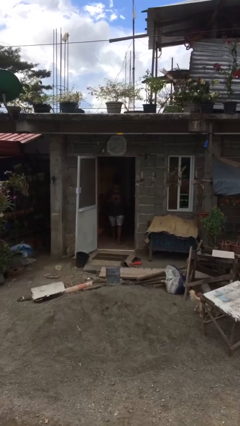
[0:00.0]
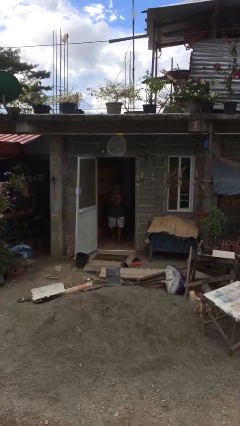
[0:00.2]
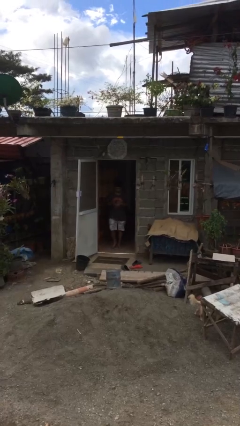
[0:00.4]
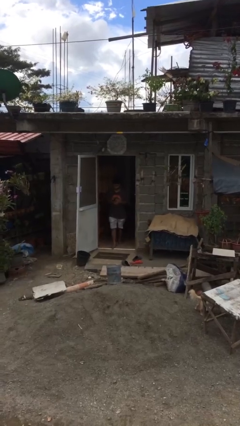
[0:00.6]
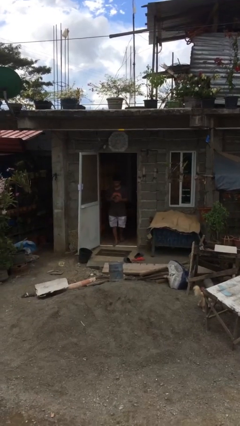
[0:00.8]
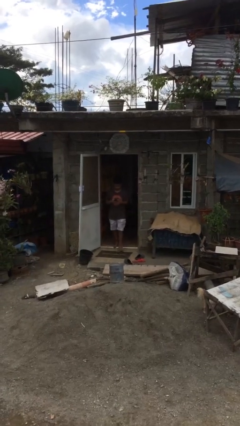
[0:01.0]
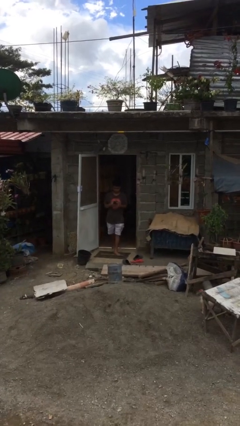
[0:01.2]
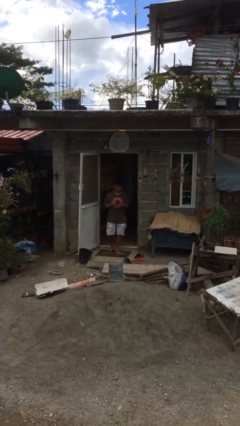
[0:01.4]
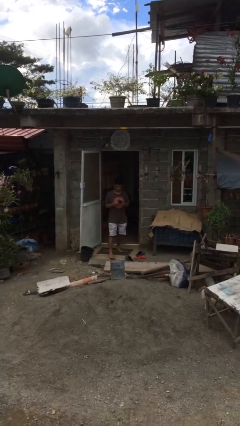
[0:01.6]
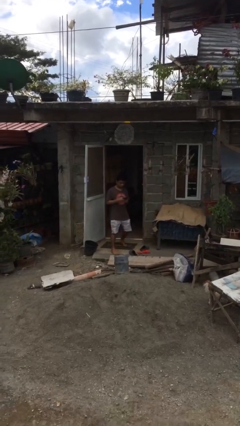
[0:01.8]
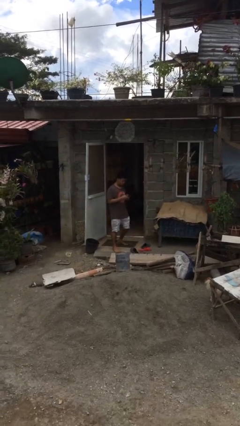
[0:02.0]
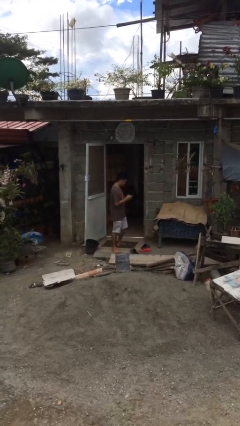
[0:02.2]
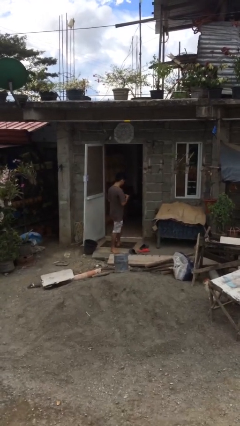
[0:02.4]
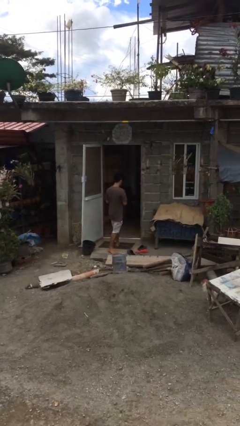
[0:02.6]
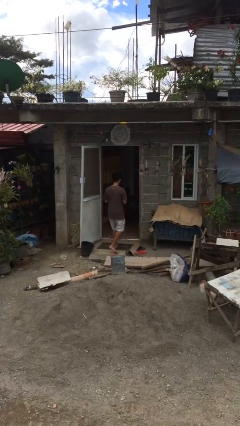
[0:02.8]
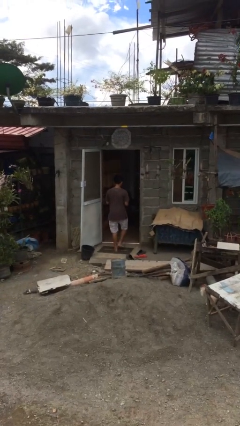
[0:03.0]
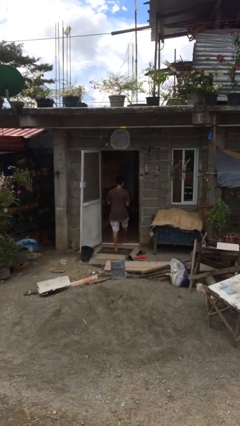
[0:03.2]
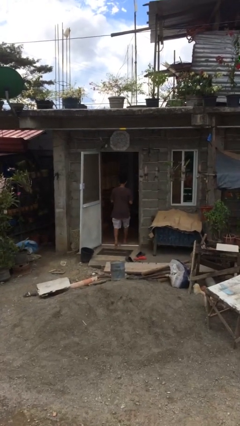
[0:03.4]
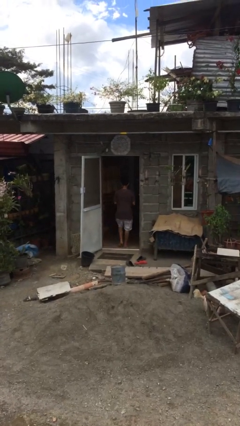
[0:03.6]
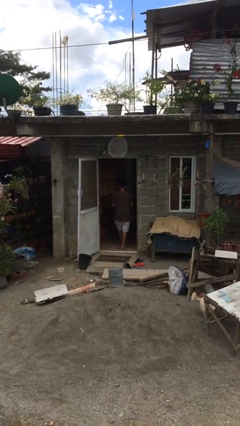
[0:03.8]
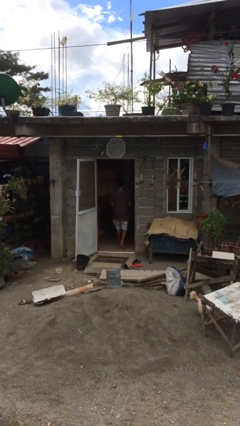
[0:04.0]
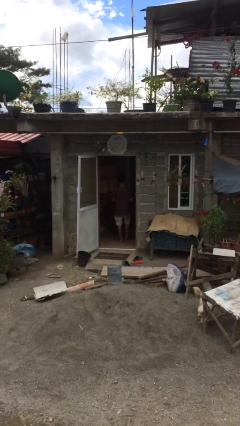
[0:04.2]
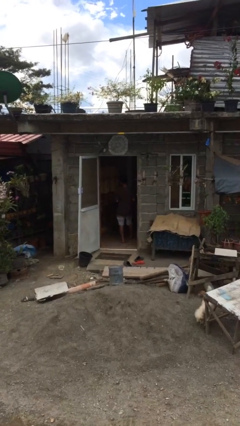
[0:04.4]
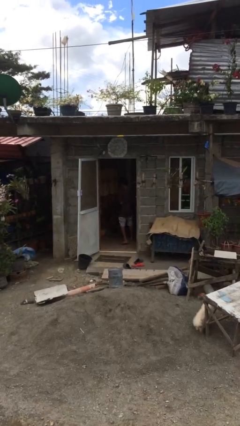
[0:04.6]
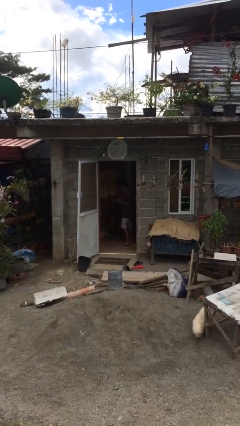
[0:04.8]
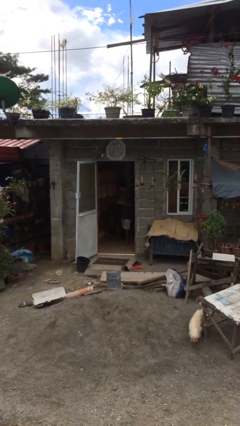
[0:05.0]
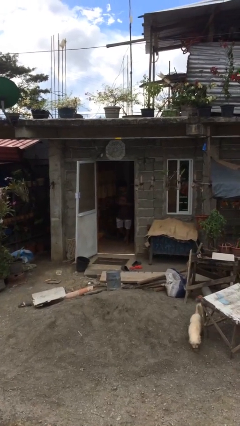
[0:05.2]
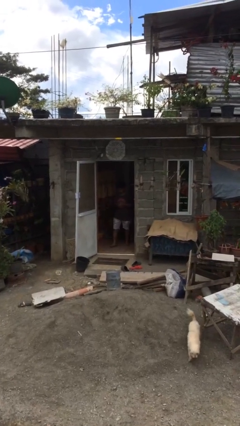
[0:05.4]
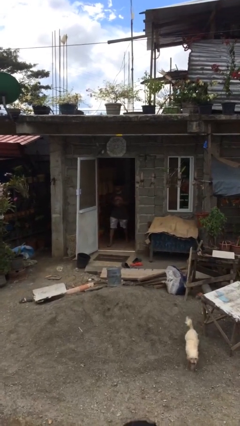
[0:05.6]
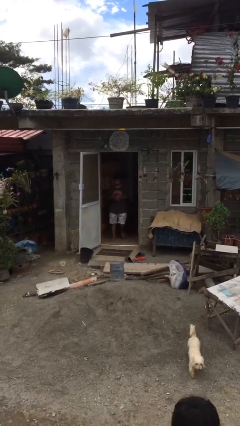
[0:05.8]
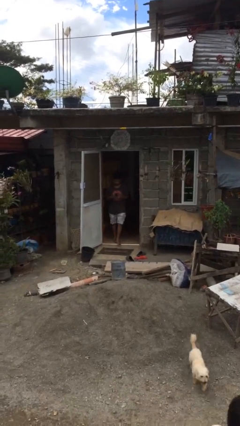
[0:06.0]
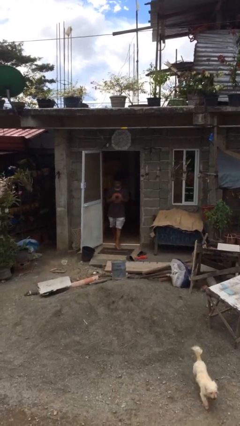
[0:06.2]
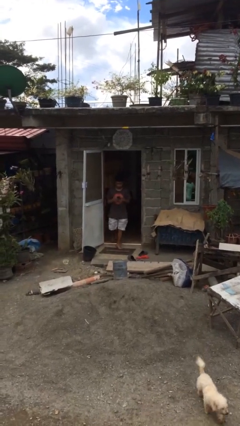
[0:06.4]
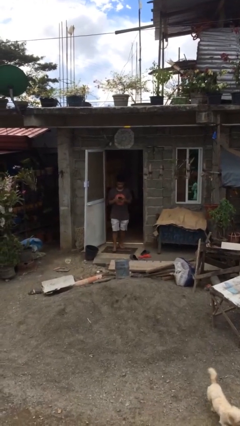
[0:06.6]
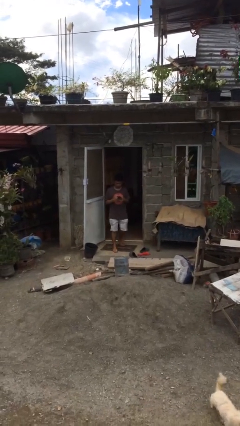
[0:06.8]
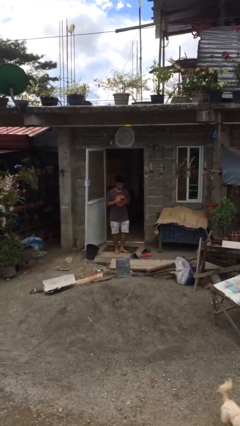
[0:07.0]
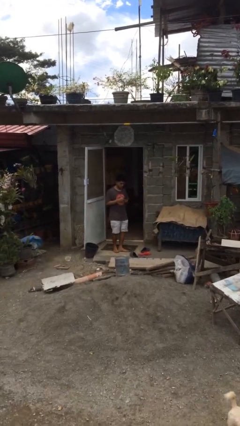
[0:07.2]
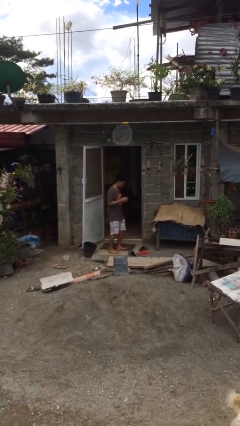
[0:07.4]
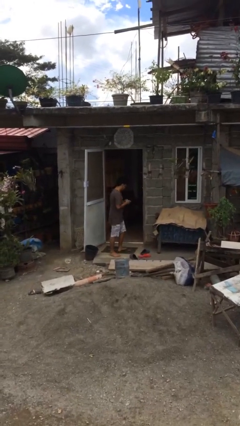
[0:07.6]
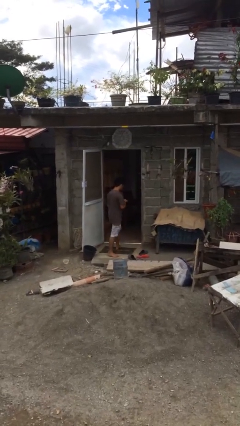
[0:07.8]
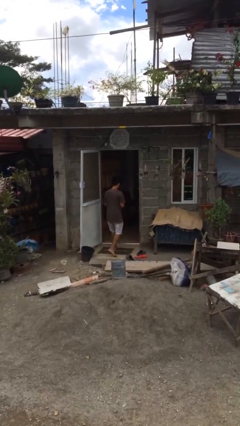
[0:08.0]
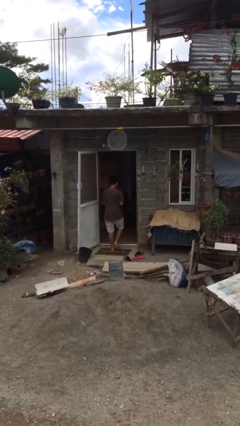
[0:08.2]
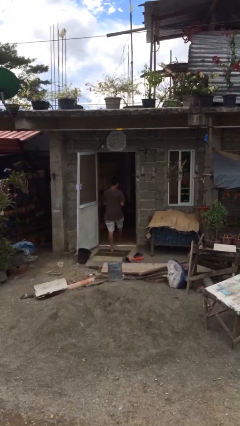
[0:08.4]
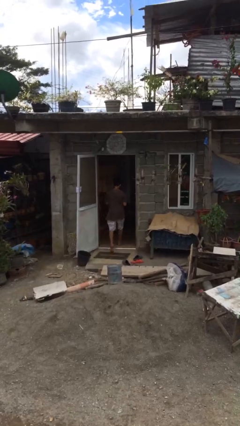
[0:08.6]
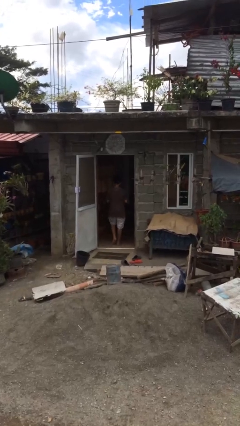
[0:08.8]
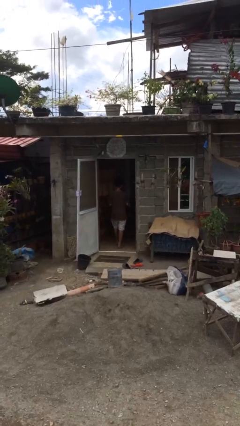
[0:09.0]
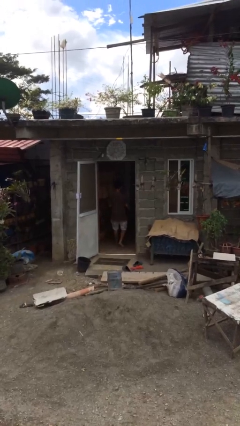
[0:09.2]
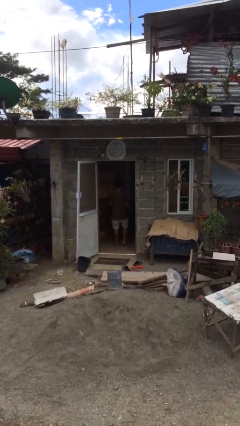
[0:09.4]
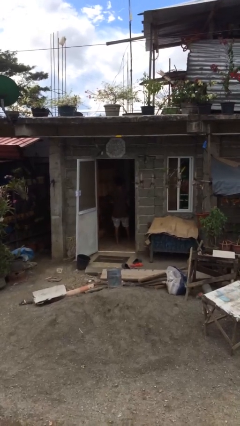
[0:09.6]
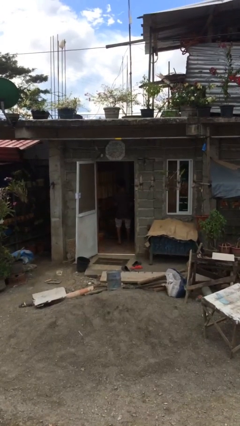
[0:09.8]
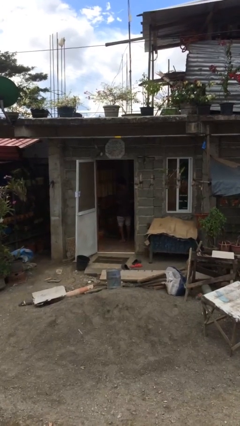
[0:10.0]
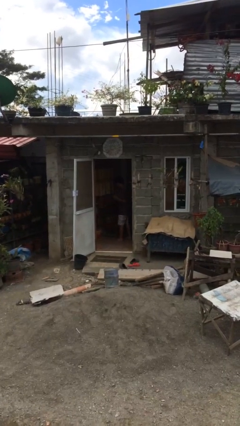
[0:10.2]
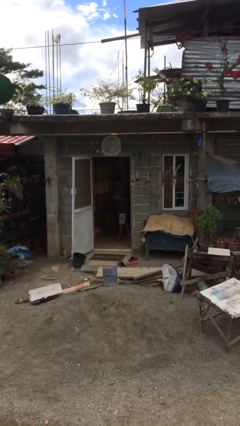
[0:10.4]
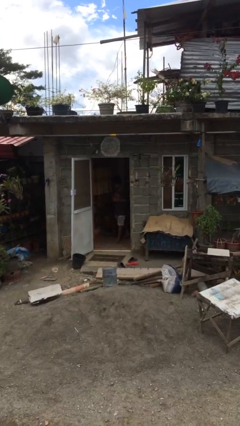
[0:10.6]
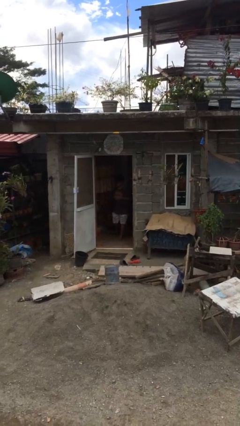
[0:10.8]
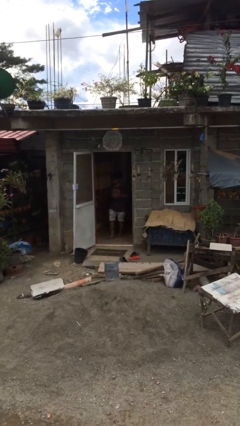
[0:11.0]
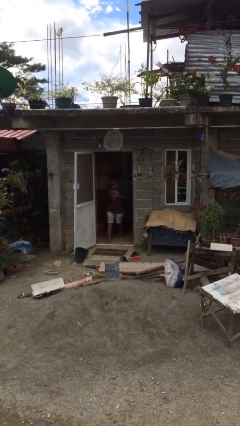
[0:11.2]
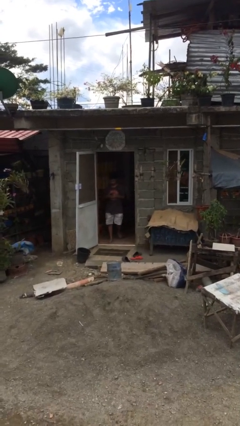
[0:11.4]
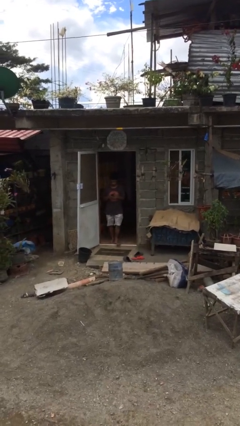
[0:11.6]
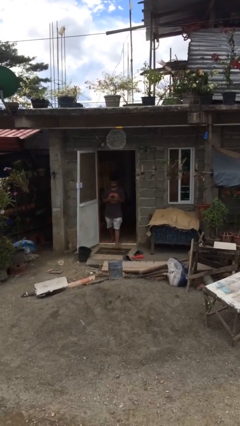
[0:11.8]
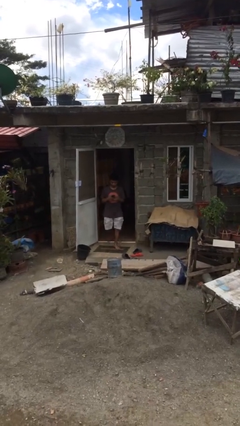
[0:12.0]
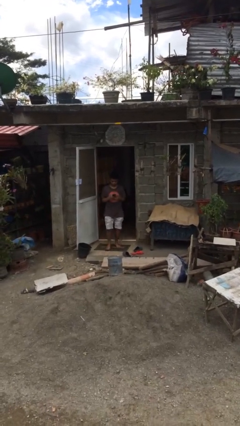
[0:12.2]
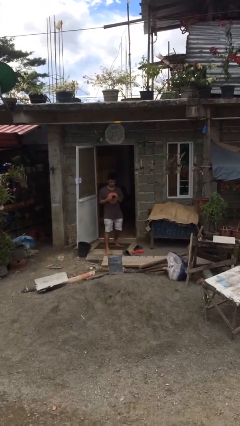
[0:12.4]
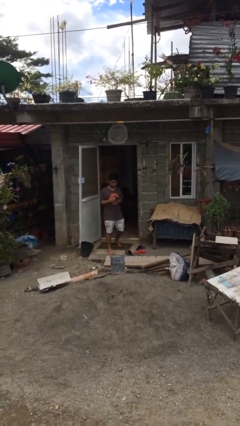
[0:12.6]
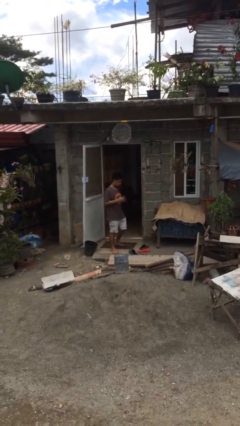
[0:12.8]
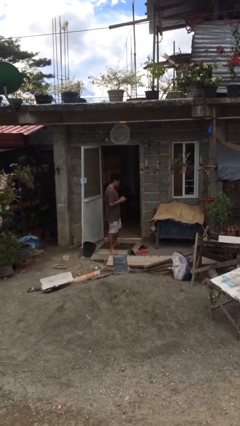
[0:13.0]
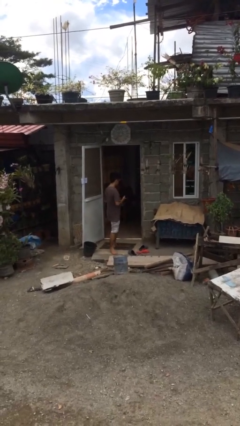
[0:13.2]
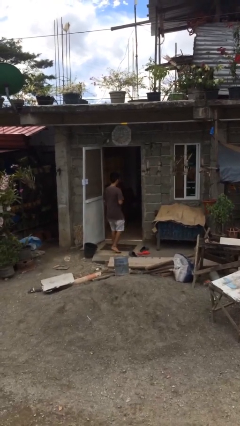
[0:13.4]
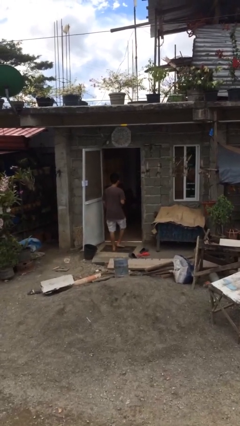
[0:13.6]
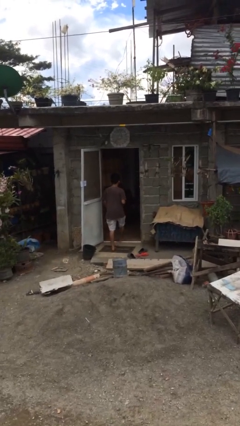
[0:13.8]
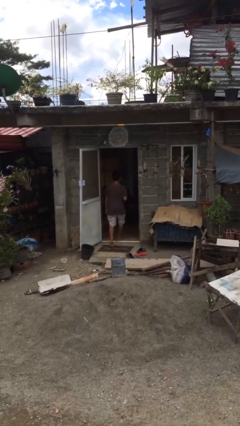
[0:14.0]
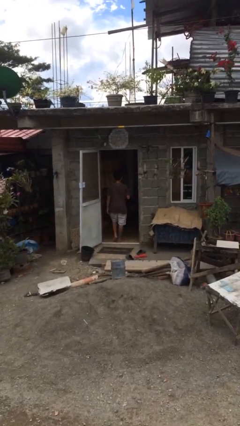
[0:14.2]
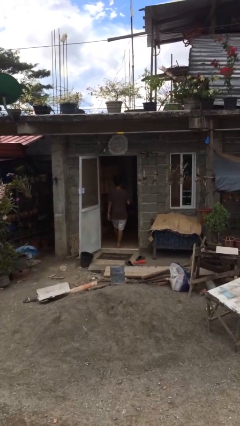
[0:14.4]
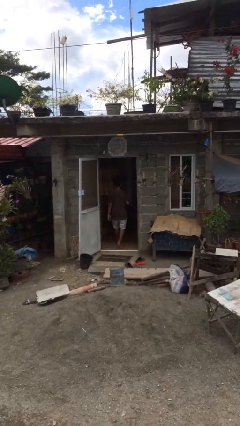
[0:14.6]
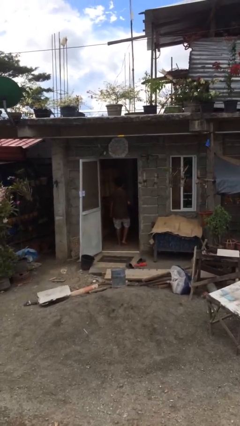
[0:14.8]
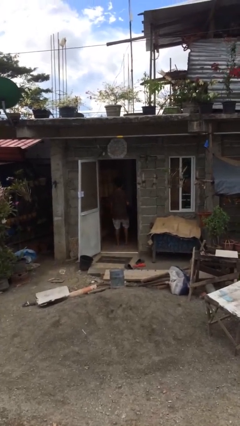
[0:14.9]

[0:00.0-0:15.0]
person texts on phone

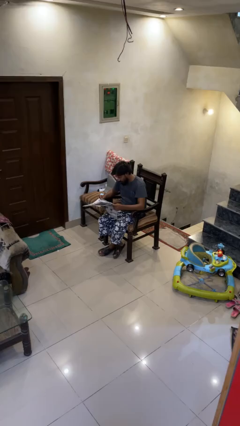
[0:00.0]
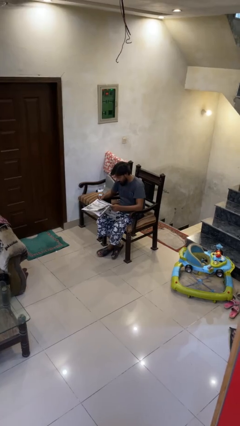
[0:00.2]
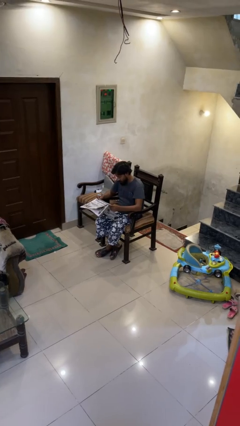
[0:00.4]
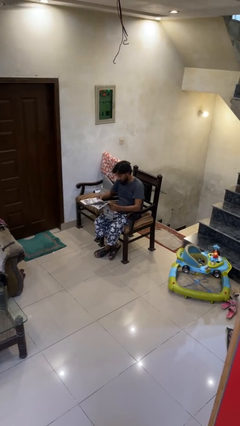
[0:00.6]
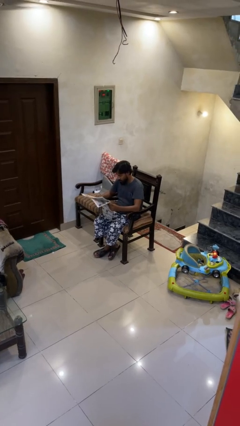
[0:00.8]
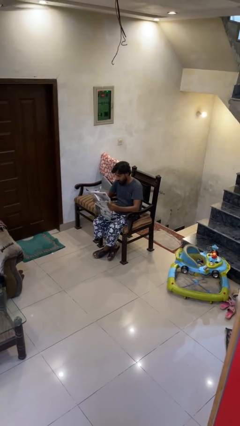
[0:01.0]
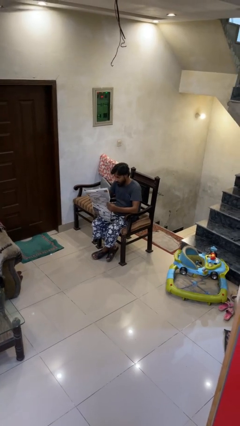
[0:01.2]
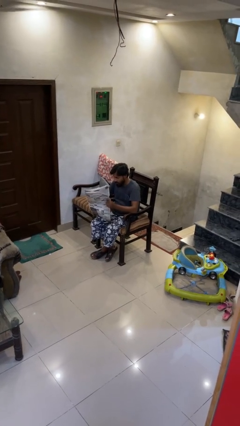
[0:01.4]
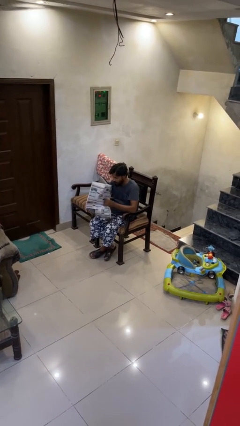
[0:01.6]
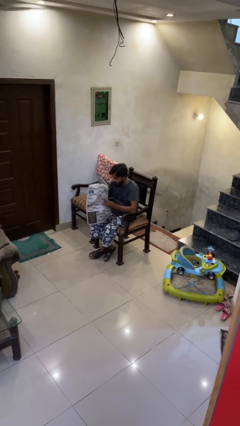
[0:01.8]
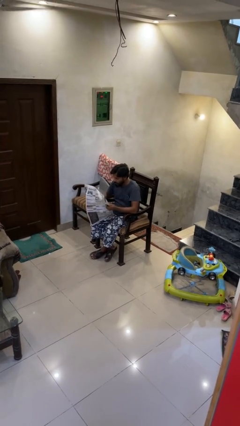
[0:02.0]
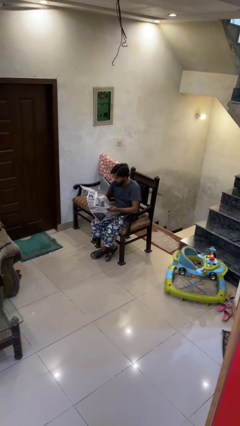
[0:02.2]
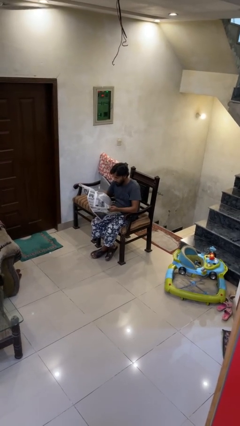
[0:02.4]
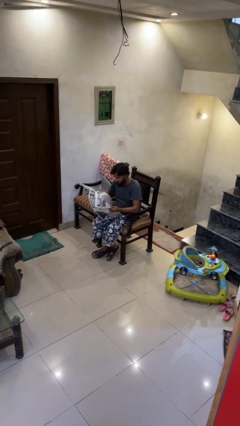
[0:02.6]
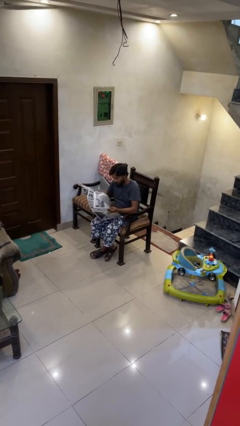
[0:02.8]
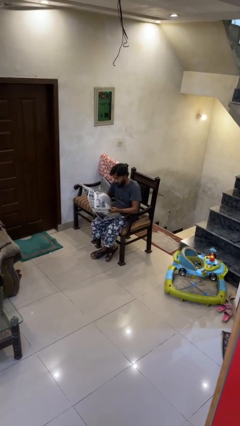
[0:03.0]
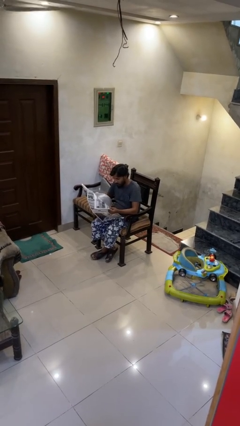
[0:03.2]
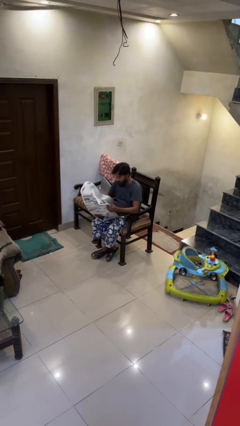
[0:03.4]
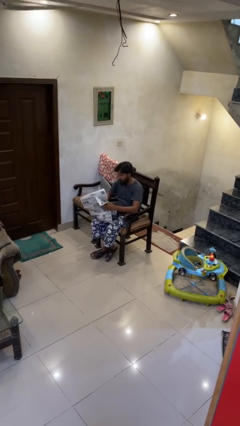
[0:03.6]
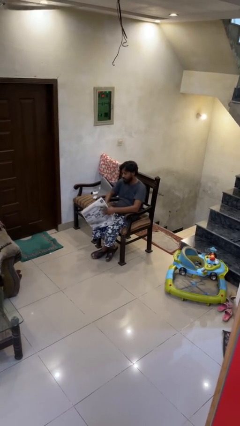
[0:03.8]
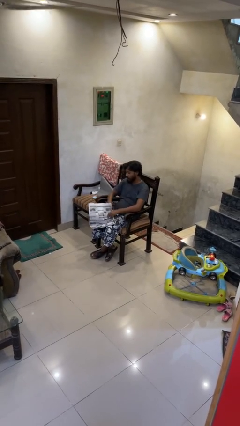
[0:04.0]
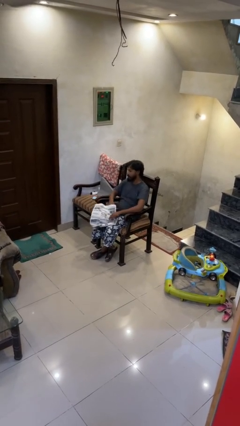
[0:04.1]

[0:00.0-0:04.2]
person reads newspaper
